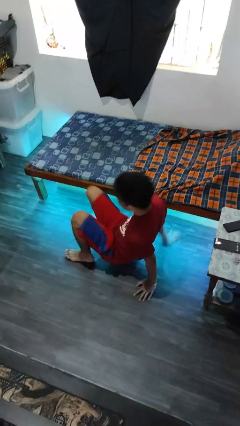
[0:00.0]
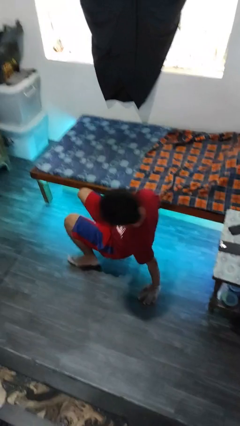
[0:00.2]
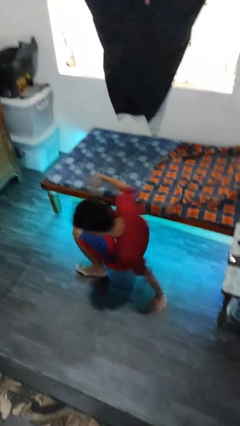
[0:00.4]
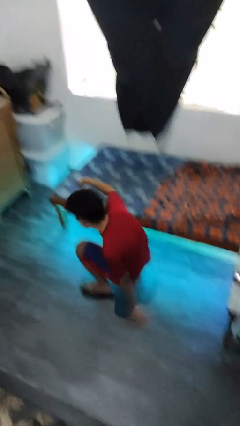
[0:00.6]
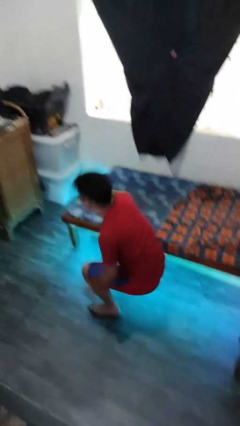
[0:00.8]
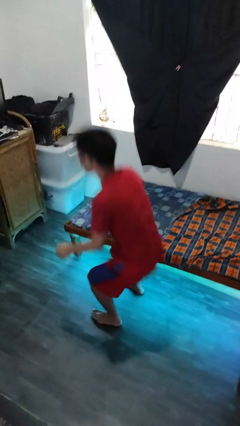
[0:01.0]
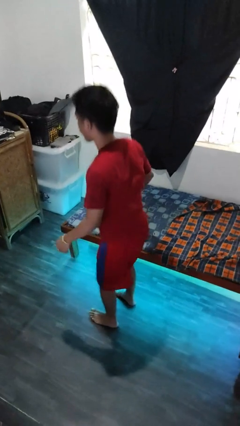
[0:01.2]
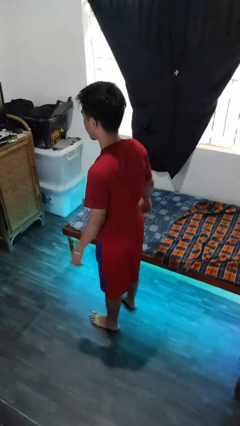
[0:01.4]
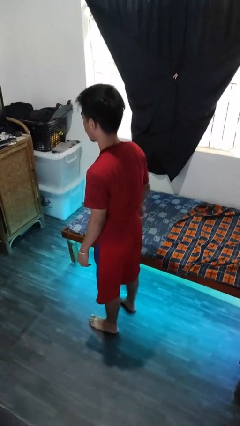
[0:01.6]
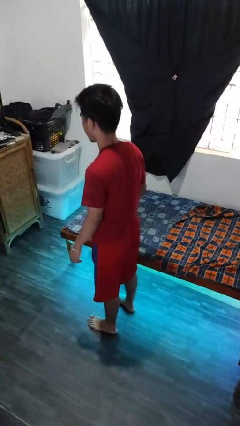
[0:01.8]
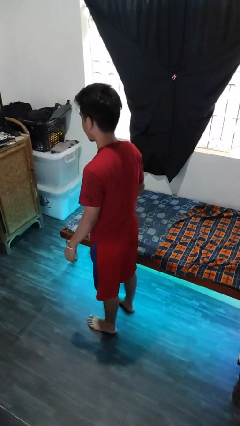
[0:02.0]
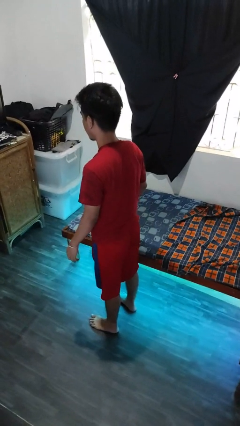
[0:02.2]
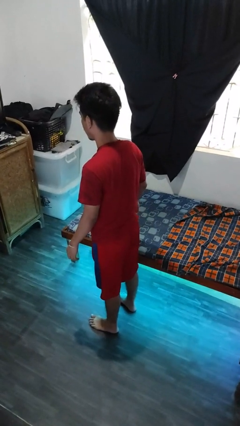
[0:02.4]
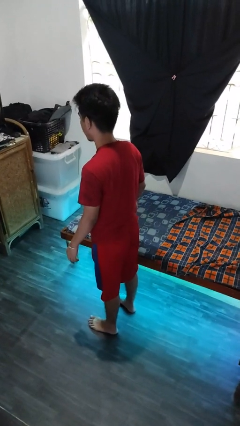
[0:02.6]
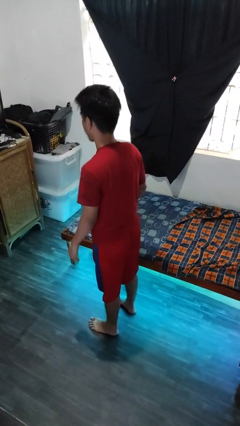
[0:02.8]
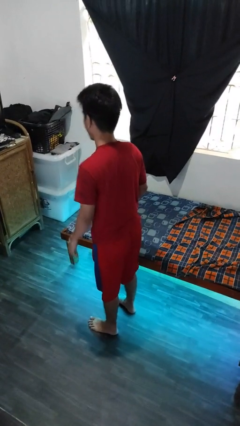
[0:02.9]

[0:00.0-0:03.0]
person stands up from floor

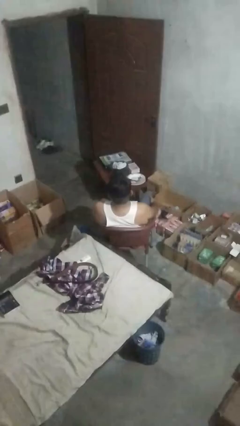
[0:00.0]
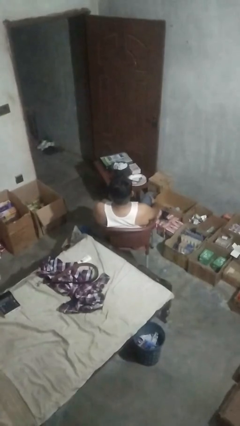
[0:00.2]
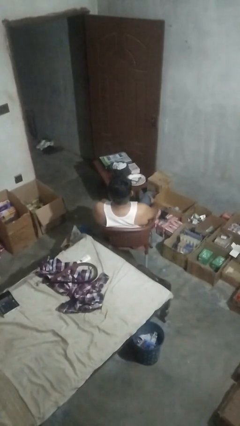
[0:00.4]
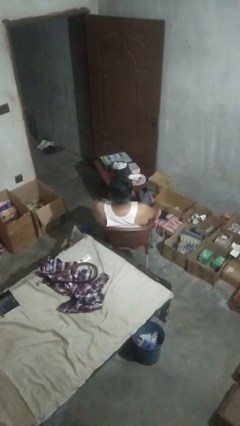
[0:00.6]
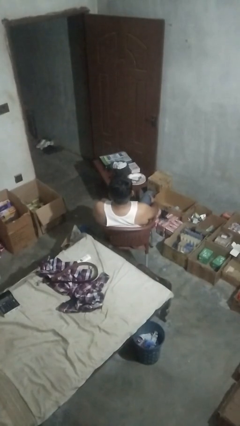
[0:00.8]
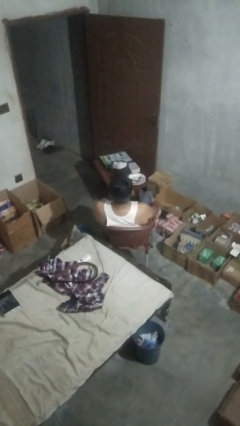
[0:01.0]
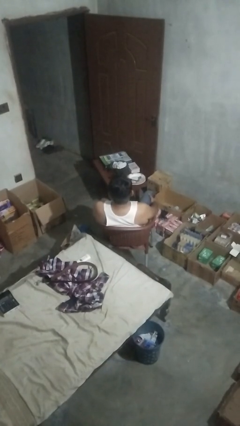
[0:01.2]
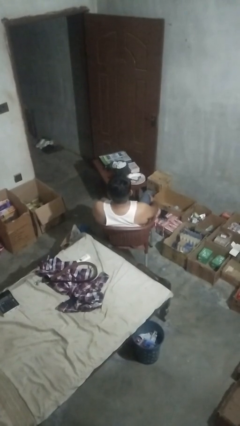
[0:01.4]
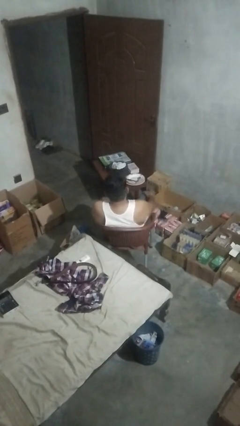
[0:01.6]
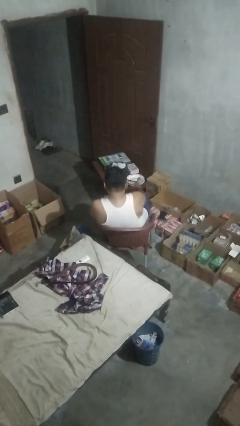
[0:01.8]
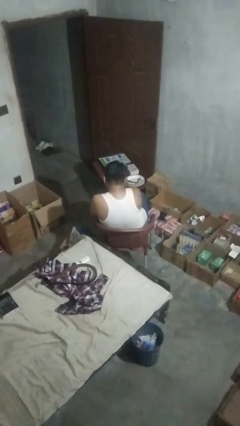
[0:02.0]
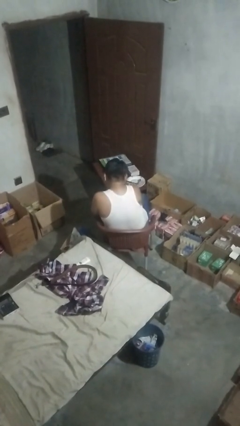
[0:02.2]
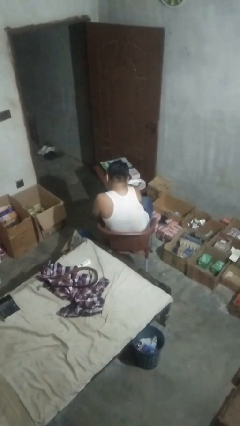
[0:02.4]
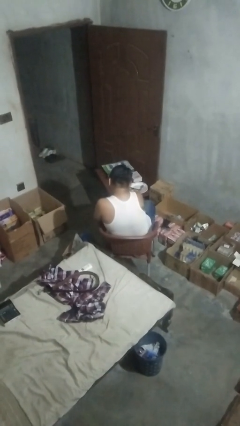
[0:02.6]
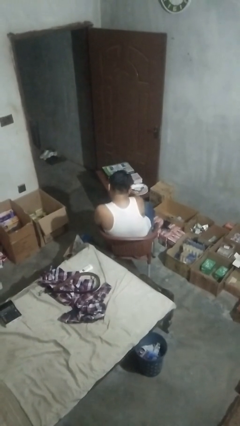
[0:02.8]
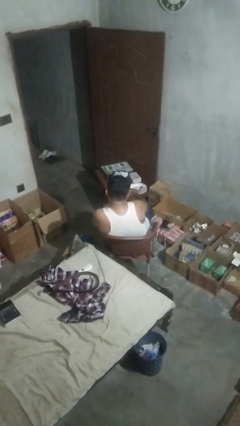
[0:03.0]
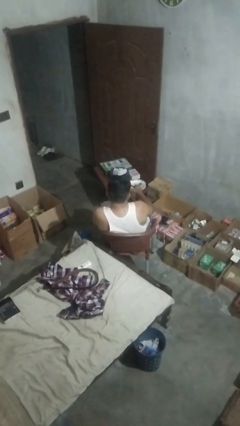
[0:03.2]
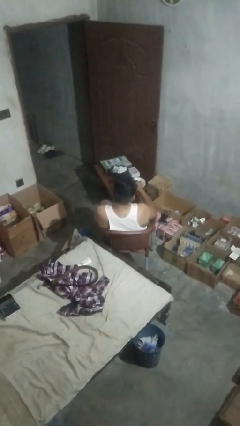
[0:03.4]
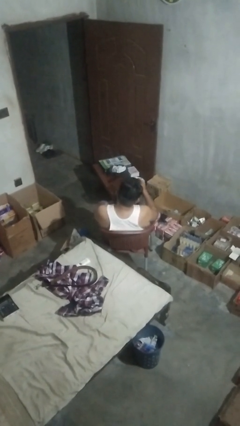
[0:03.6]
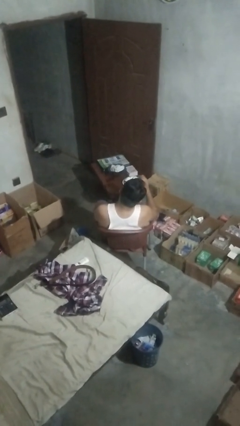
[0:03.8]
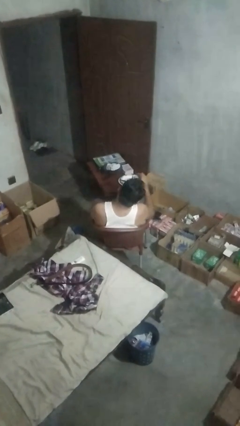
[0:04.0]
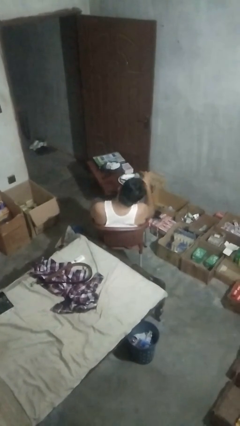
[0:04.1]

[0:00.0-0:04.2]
person picks up object from table

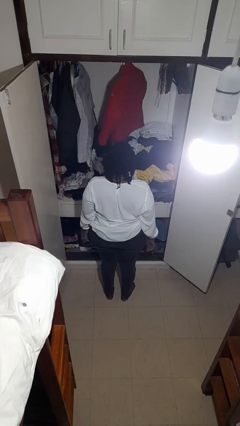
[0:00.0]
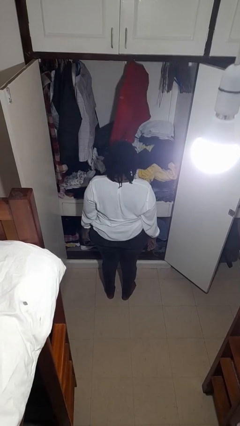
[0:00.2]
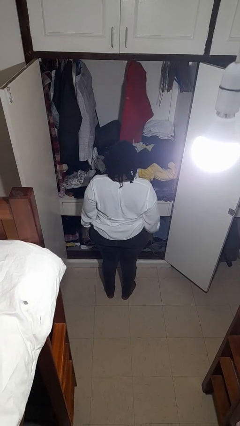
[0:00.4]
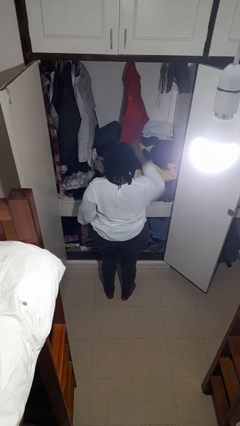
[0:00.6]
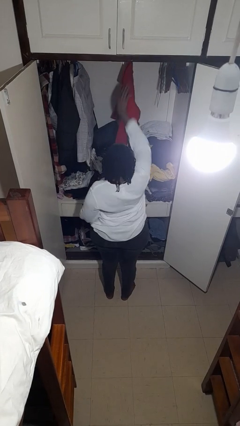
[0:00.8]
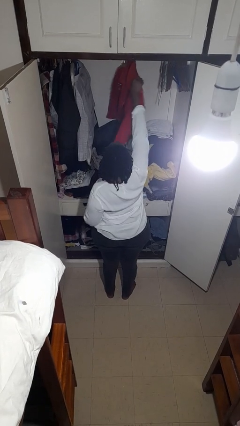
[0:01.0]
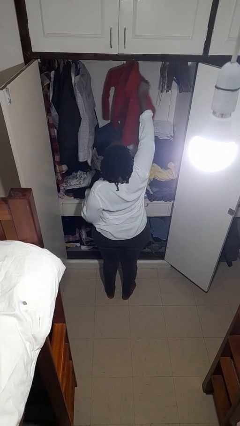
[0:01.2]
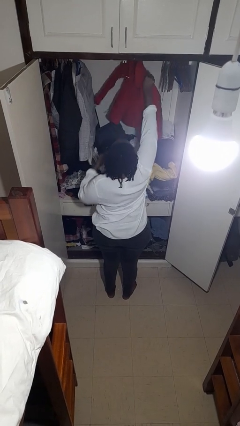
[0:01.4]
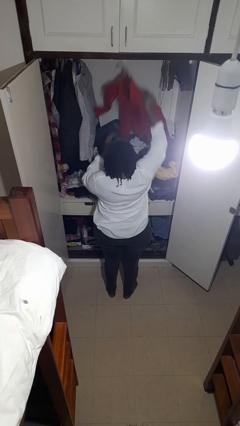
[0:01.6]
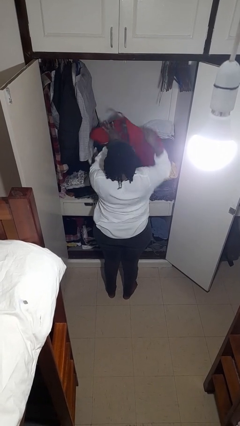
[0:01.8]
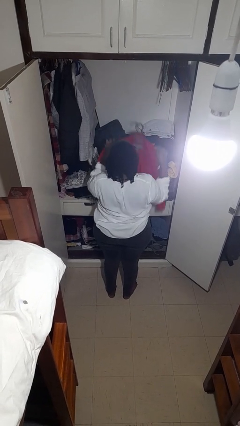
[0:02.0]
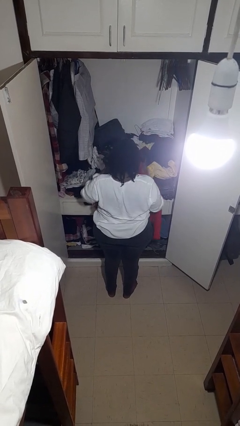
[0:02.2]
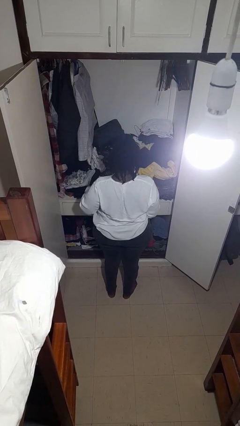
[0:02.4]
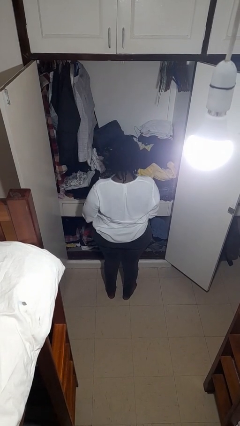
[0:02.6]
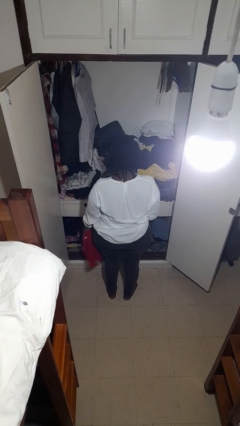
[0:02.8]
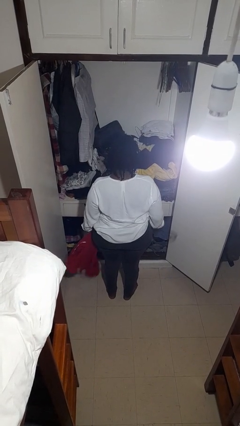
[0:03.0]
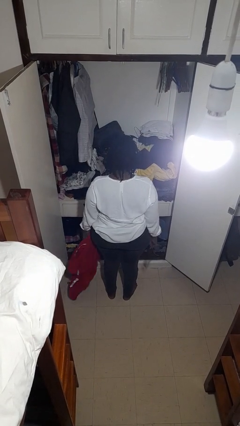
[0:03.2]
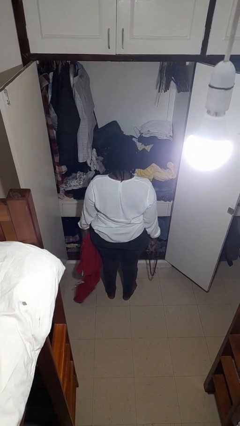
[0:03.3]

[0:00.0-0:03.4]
person takes clothes from closet

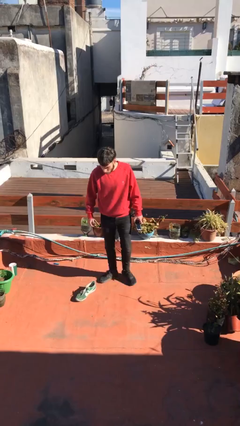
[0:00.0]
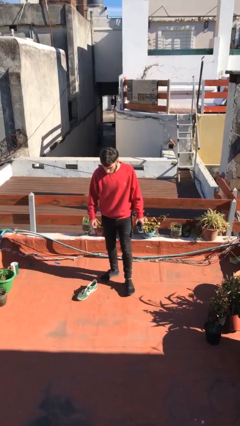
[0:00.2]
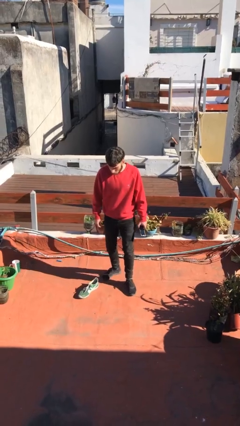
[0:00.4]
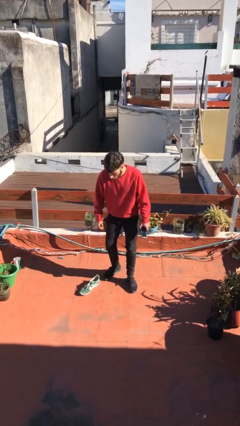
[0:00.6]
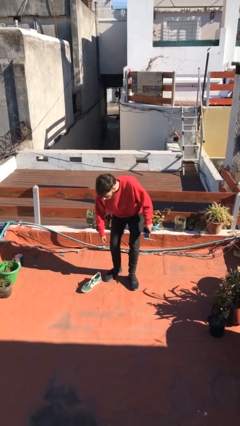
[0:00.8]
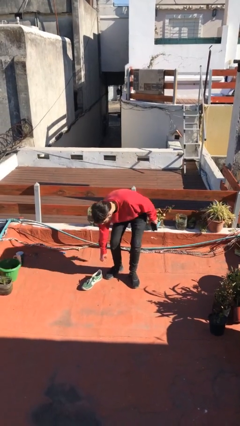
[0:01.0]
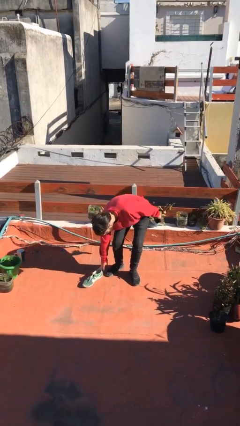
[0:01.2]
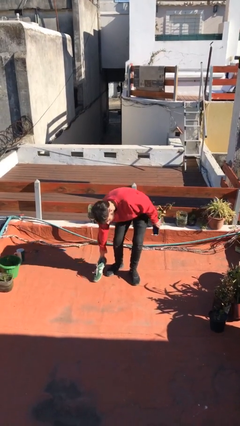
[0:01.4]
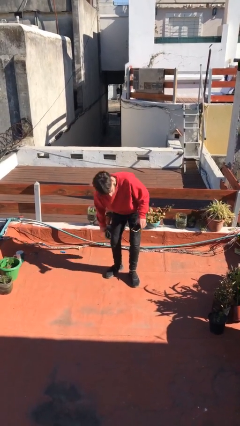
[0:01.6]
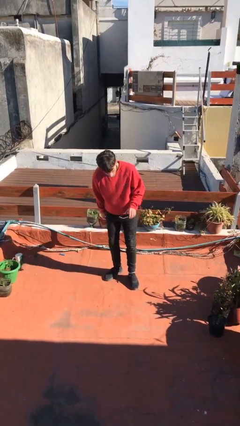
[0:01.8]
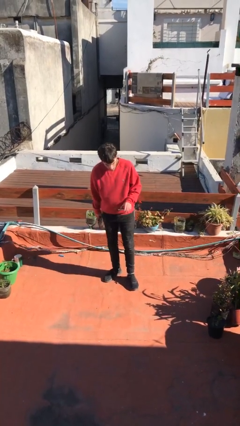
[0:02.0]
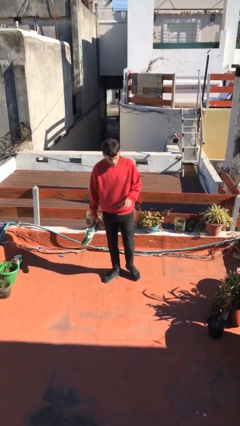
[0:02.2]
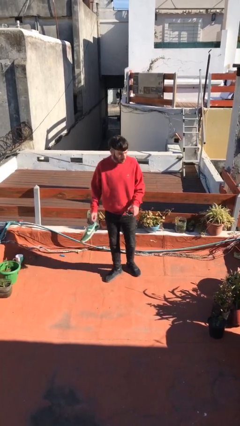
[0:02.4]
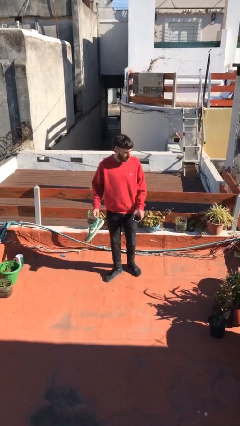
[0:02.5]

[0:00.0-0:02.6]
person picks up object from floor

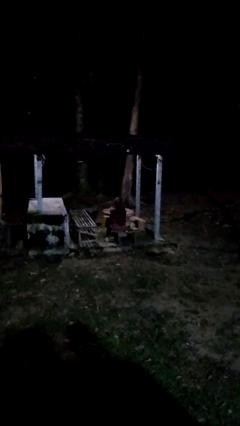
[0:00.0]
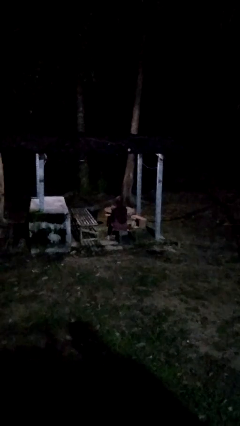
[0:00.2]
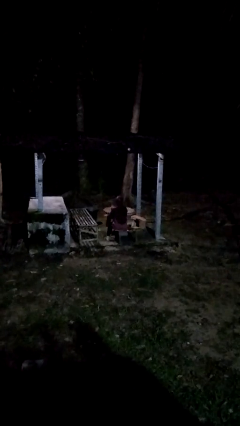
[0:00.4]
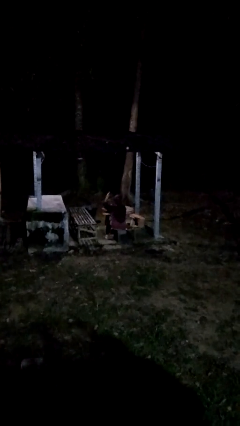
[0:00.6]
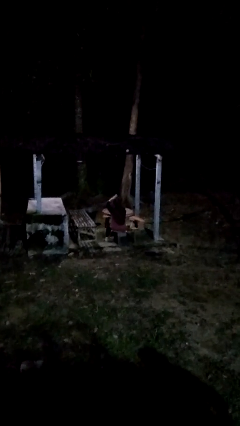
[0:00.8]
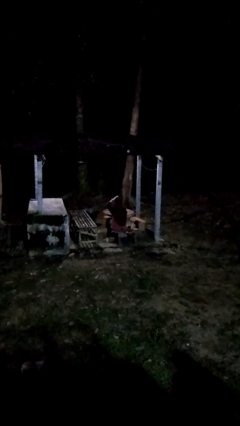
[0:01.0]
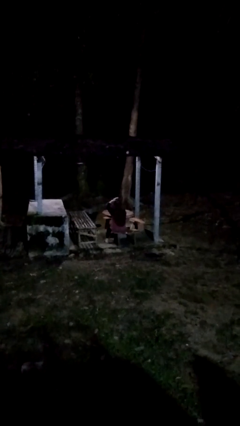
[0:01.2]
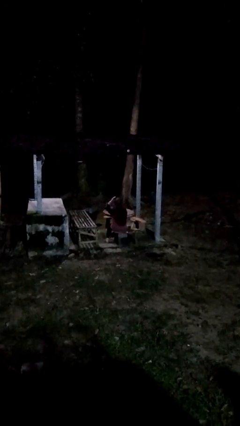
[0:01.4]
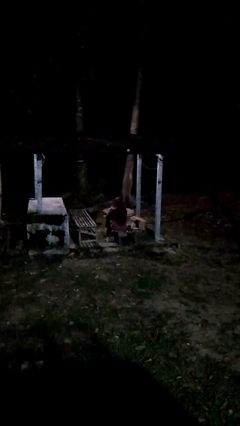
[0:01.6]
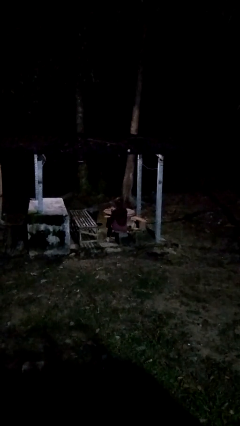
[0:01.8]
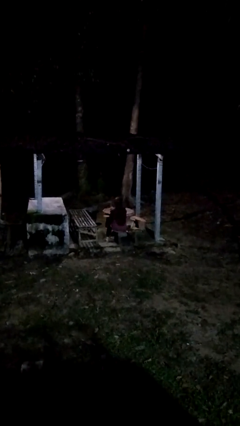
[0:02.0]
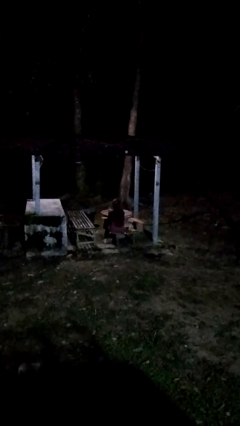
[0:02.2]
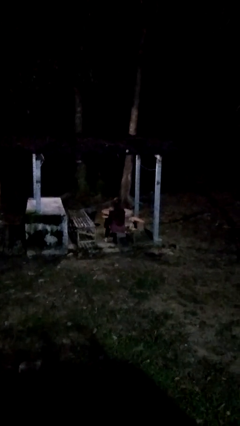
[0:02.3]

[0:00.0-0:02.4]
person pats head

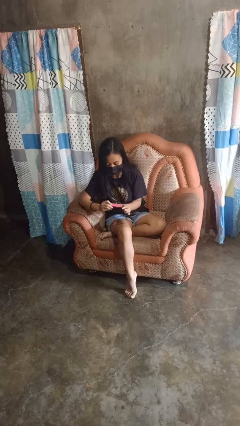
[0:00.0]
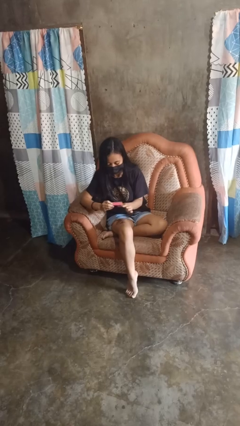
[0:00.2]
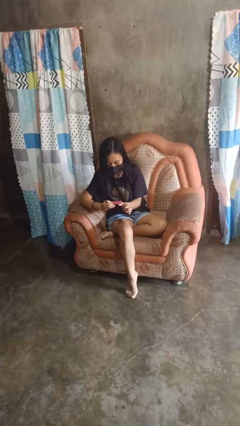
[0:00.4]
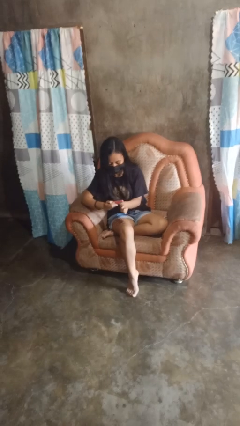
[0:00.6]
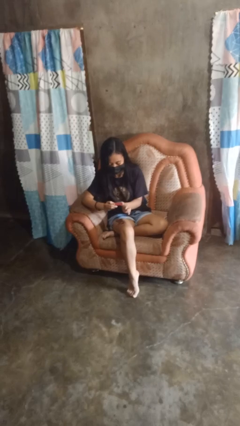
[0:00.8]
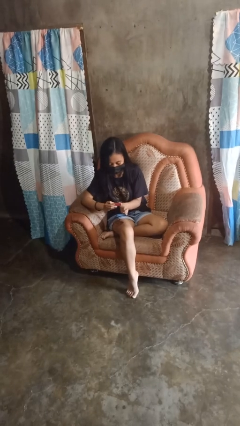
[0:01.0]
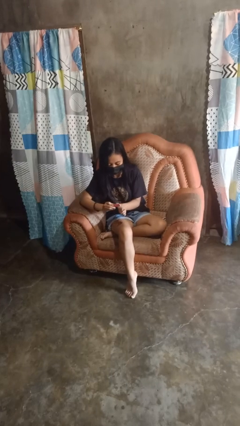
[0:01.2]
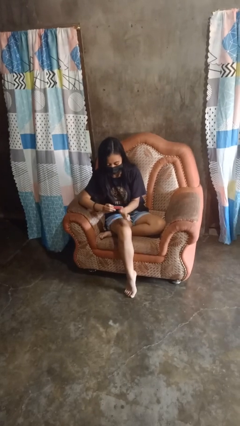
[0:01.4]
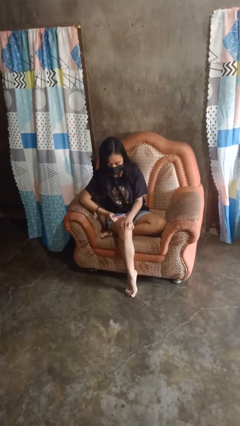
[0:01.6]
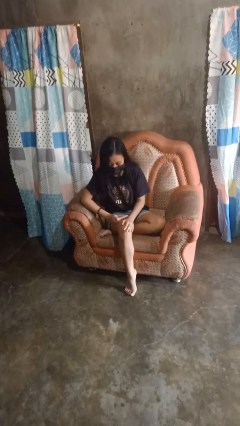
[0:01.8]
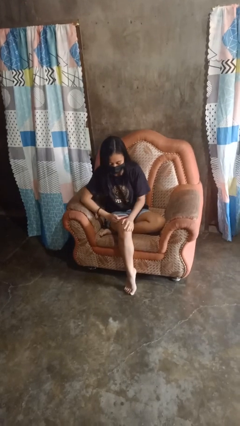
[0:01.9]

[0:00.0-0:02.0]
person files fingernails

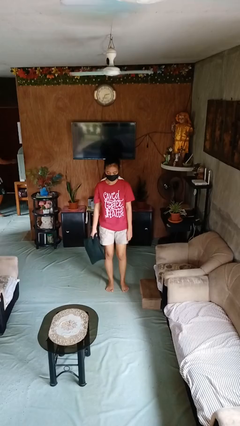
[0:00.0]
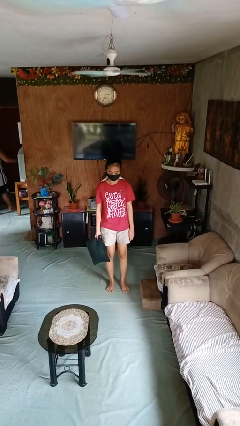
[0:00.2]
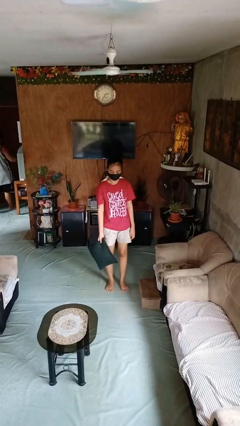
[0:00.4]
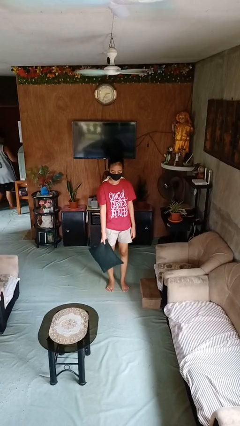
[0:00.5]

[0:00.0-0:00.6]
person throws object to ground
